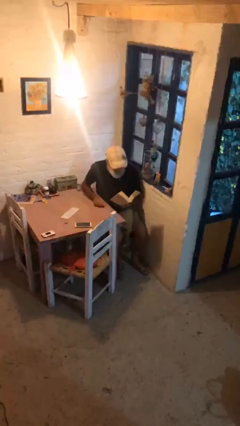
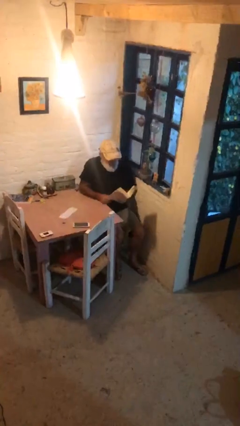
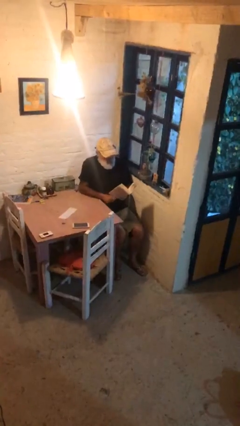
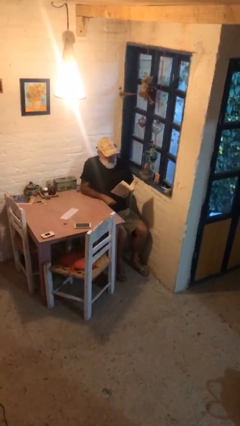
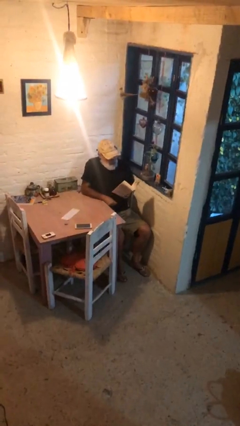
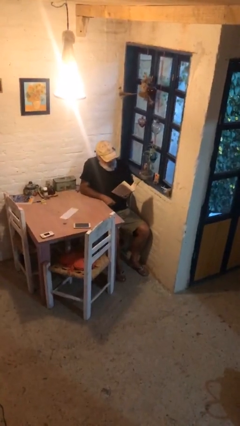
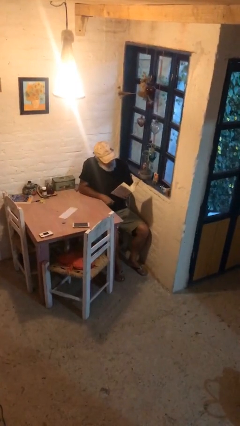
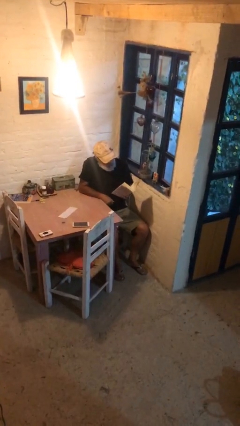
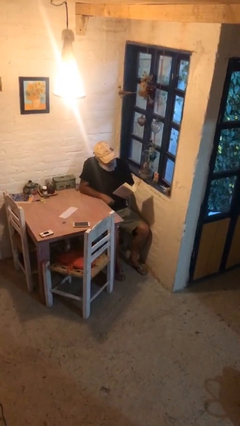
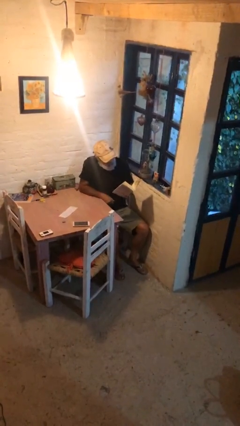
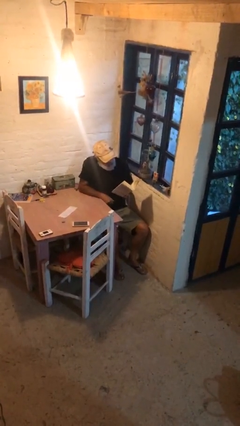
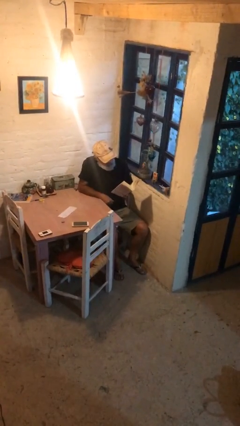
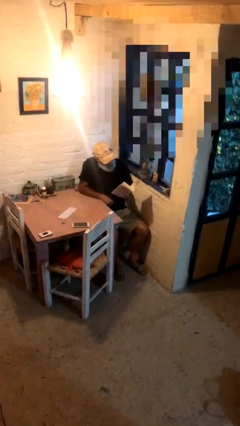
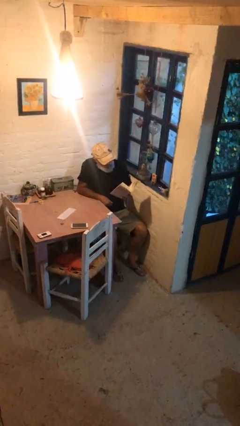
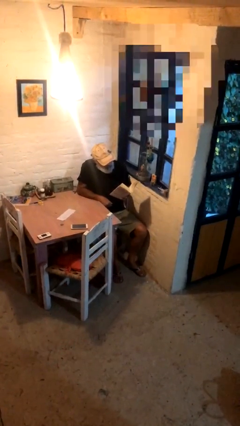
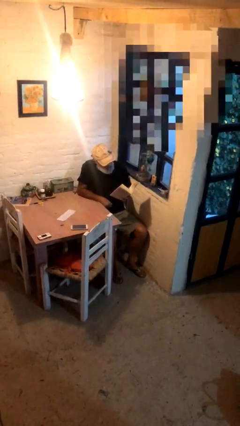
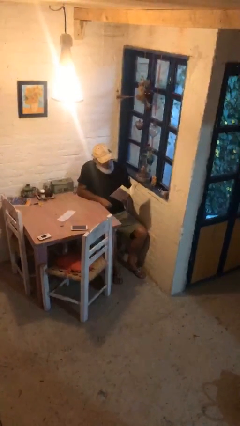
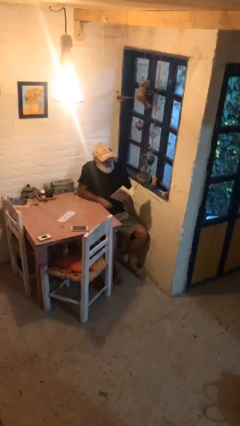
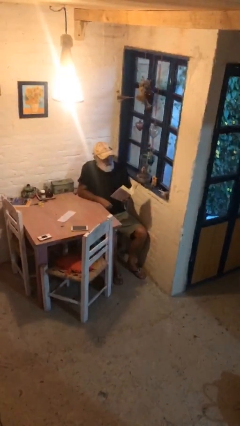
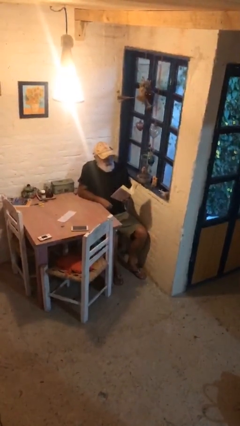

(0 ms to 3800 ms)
person reads document

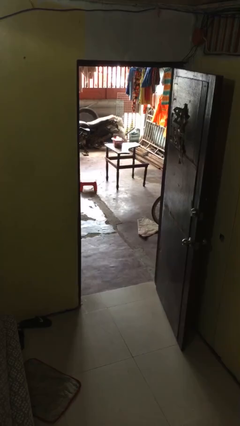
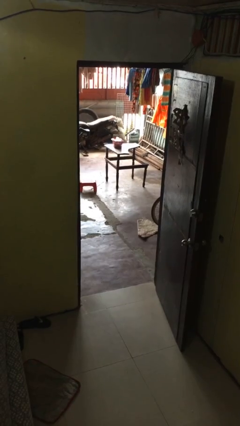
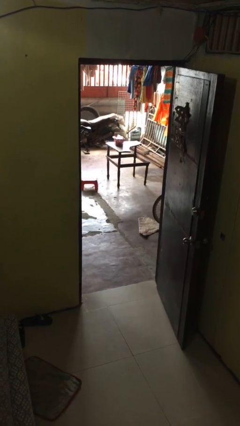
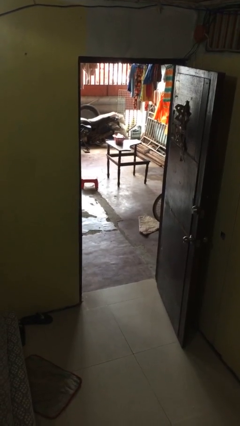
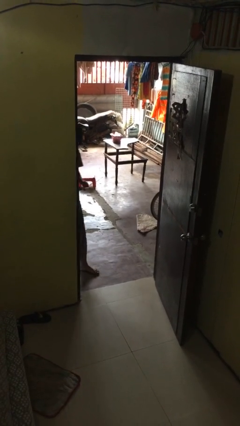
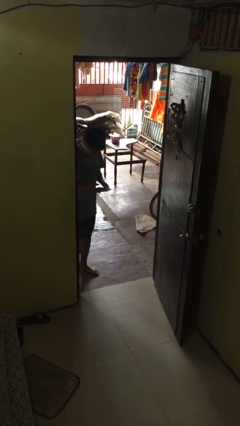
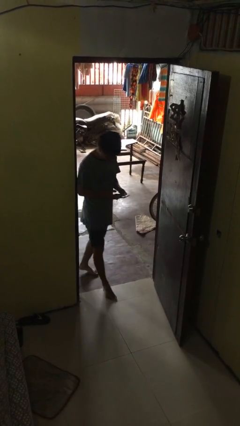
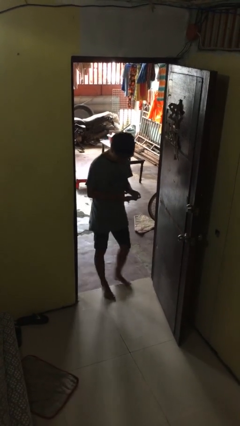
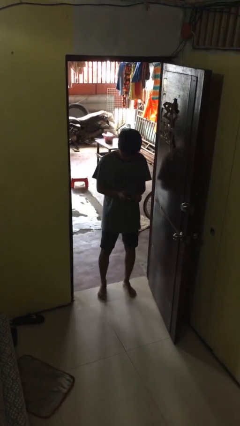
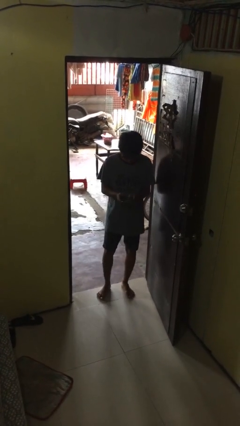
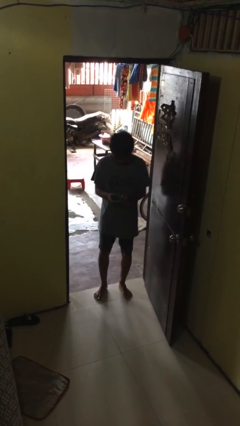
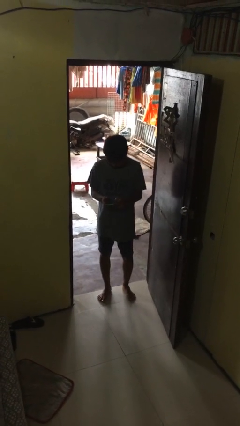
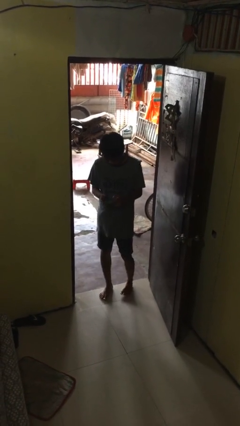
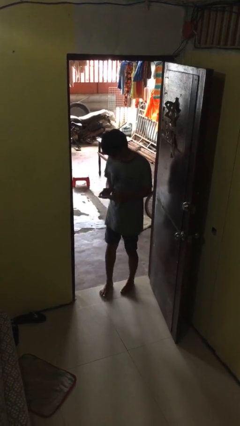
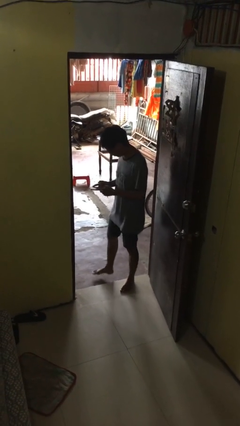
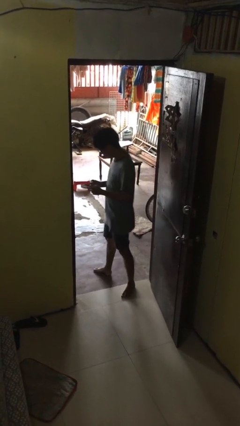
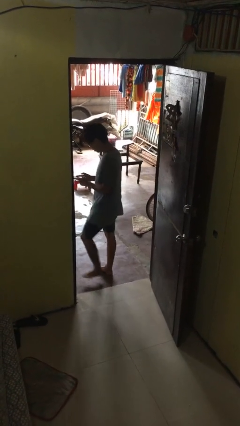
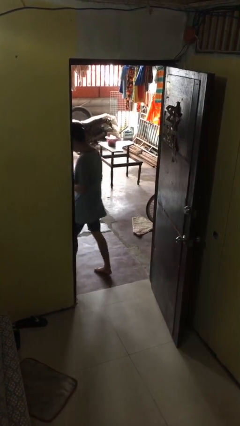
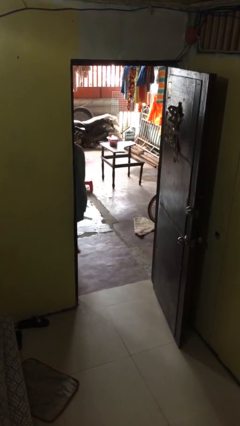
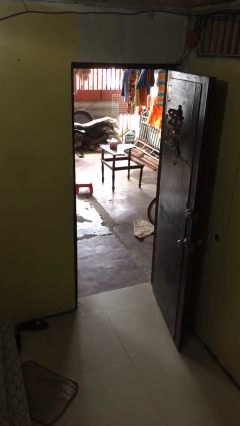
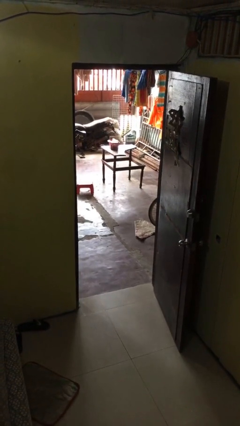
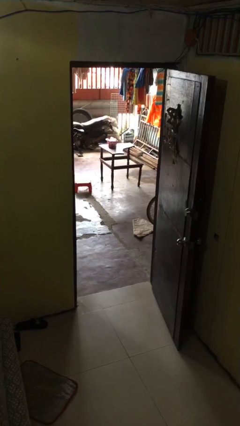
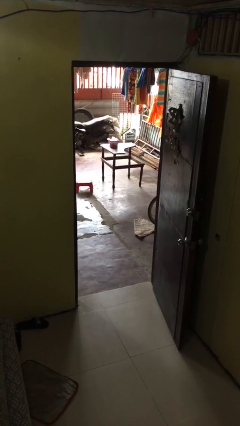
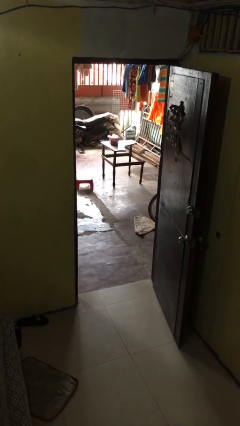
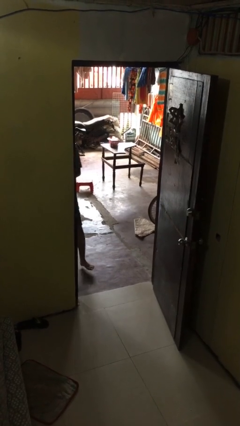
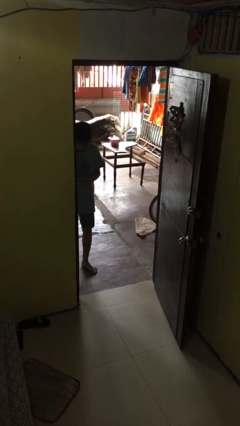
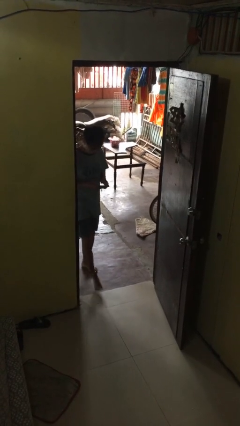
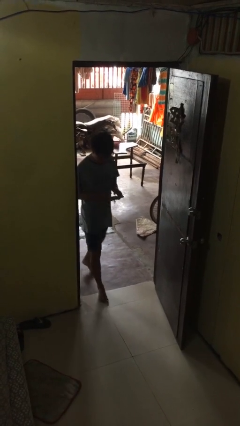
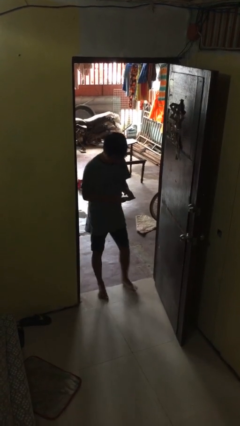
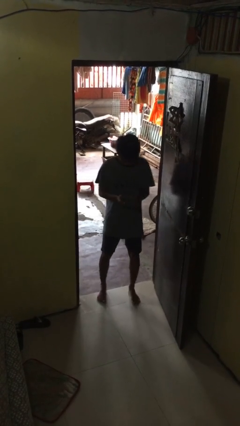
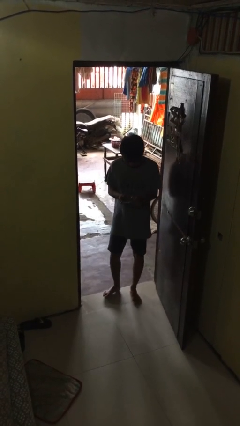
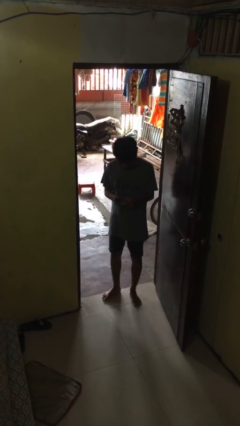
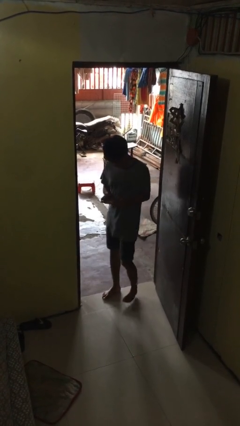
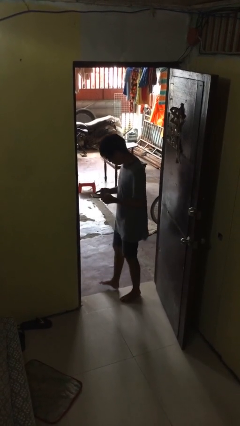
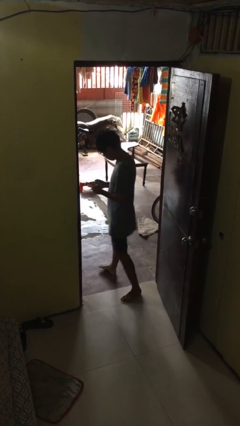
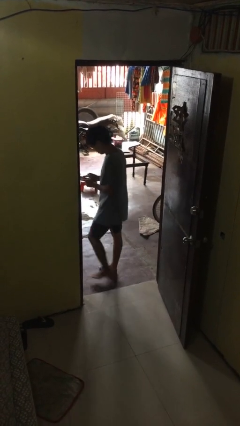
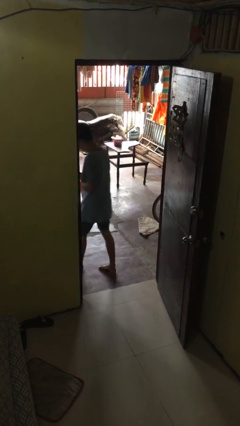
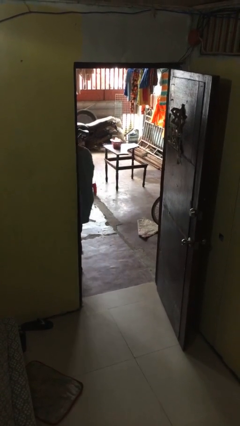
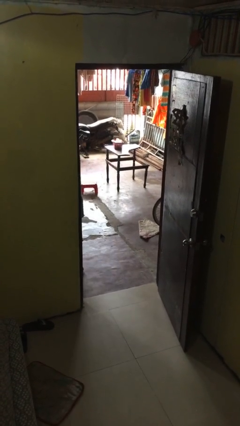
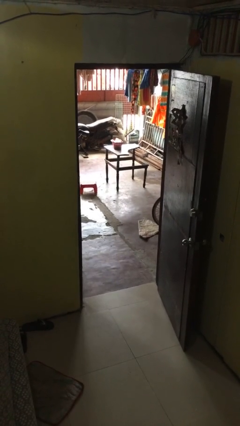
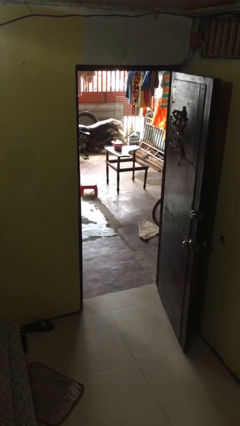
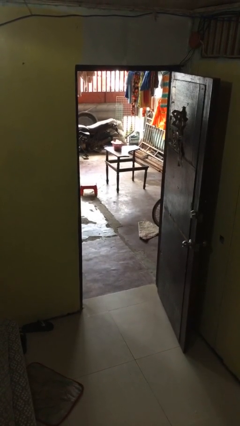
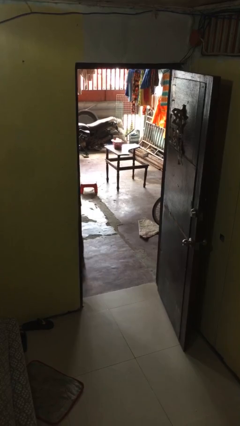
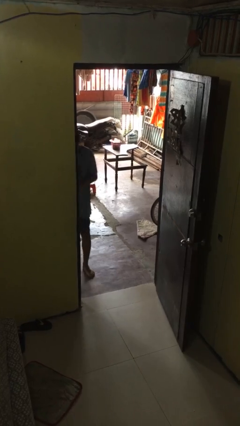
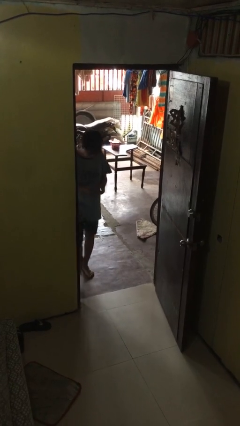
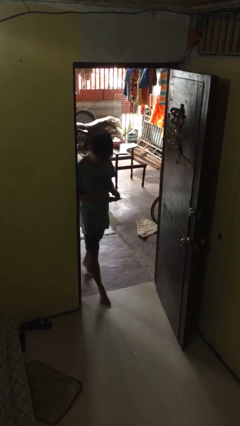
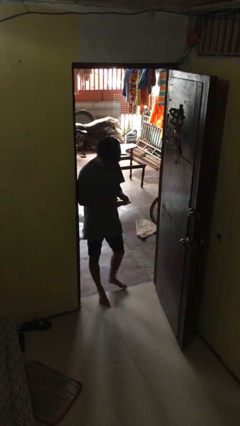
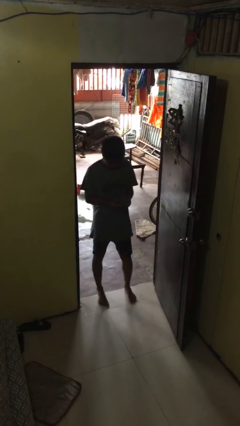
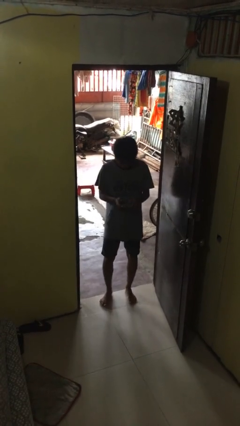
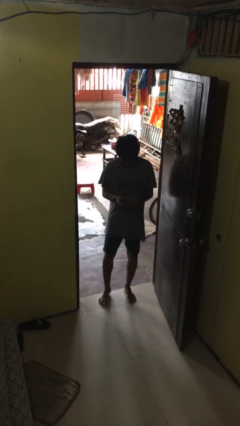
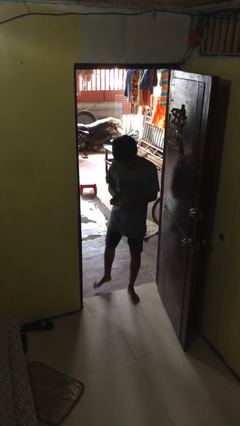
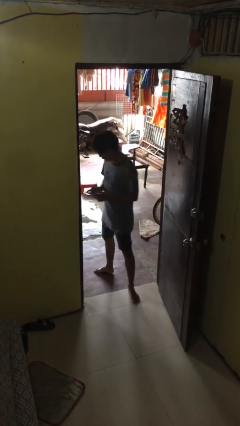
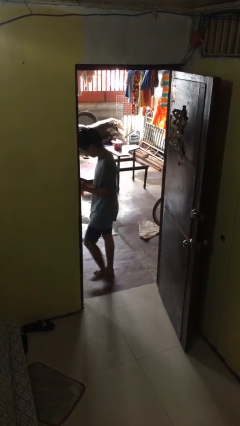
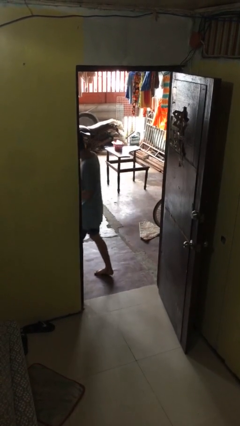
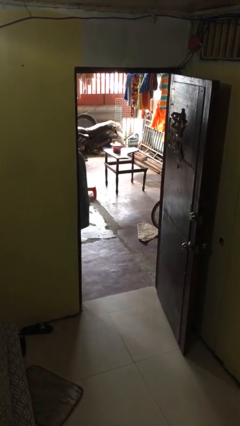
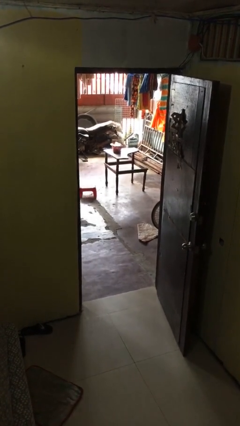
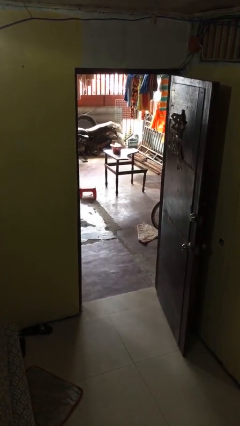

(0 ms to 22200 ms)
person texts on phone

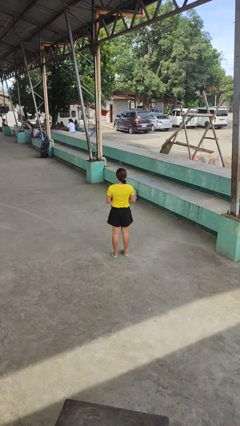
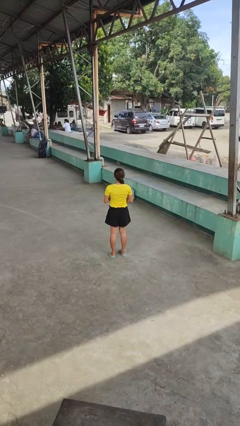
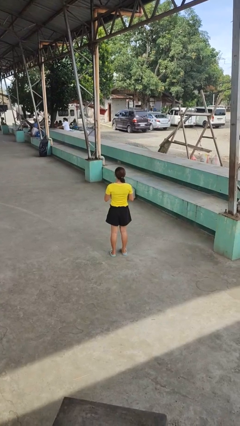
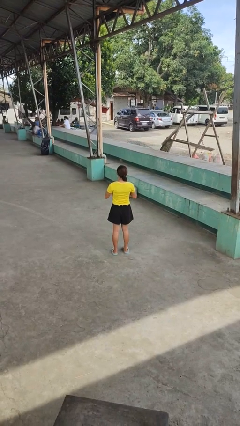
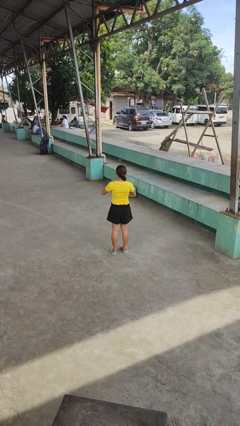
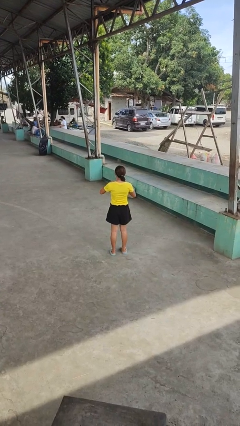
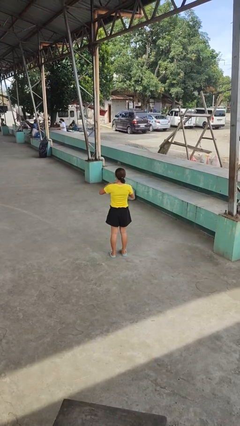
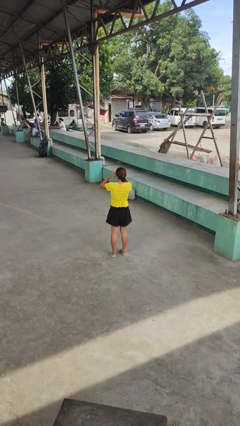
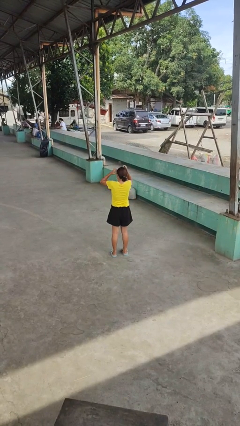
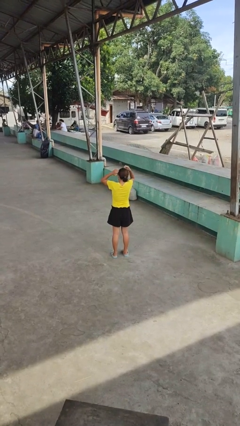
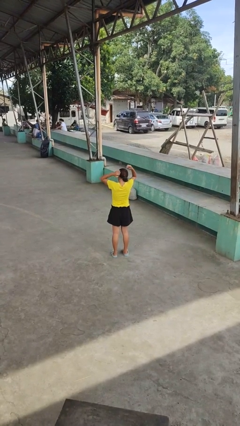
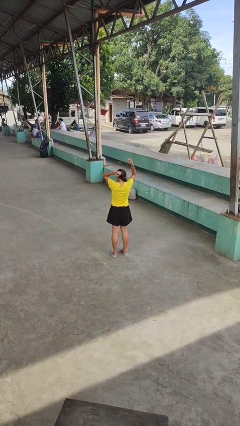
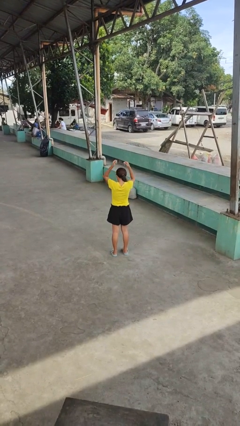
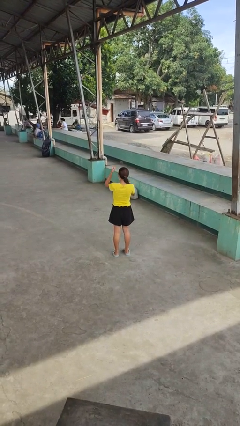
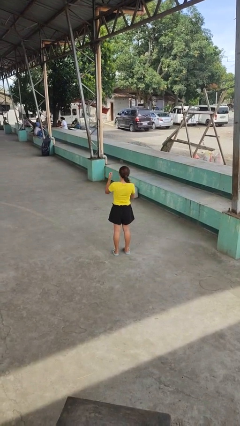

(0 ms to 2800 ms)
person takes off necklace

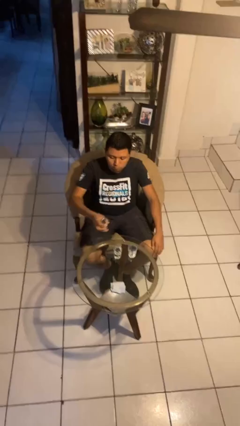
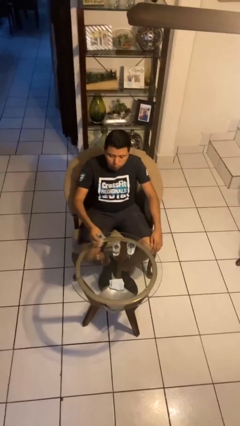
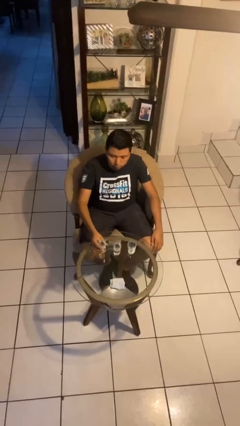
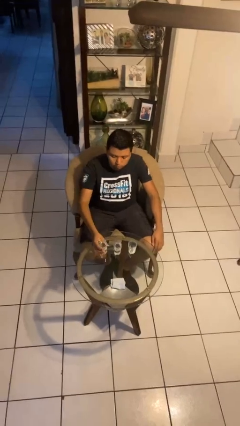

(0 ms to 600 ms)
person puts down object on table
